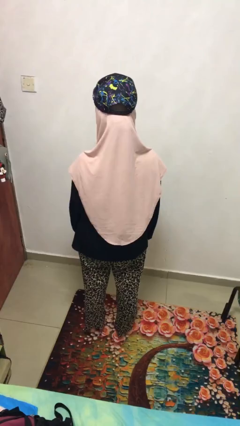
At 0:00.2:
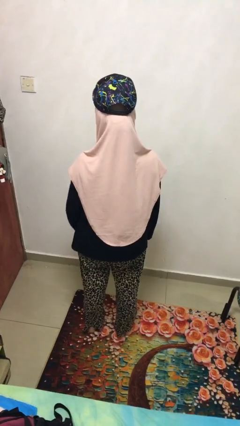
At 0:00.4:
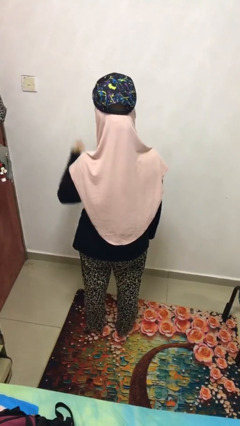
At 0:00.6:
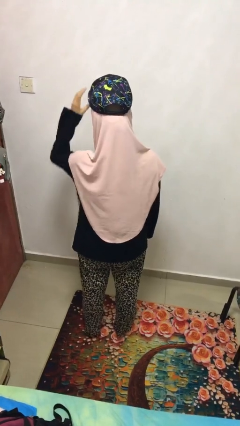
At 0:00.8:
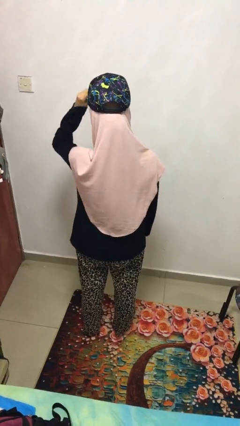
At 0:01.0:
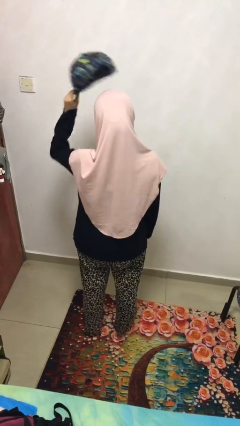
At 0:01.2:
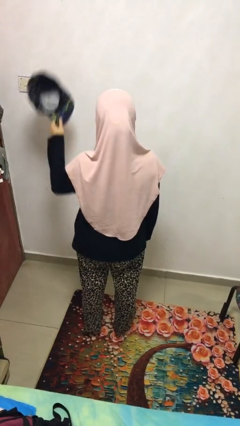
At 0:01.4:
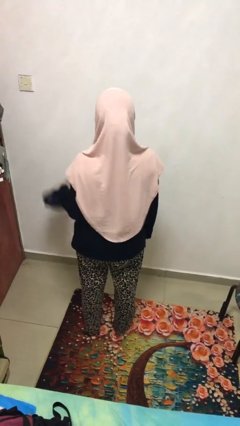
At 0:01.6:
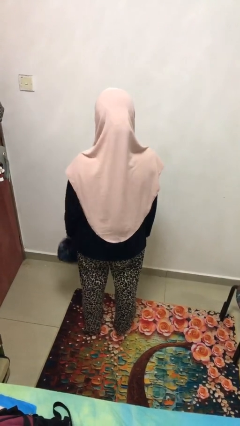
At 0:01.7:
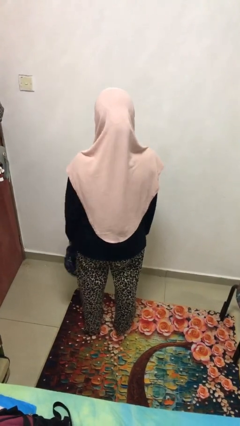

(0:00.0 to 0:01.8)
person takes off hat

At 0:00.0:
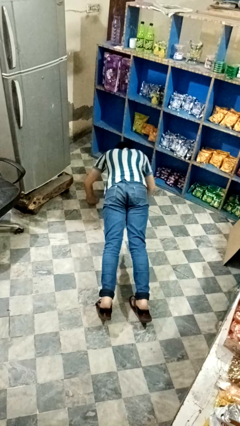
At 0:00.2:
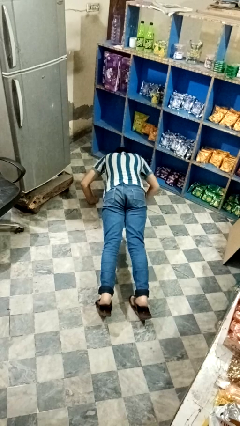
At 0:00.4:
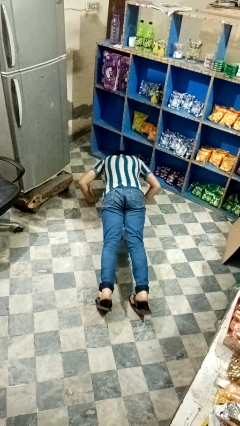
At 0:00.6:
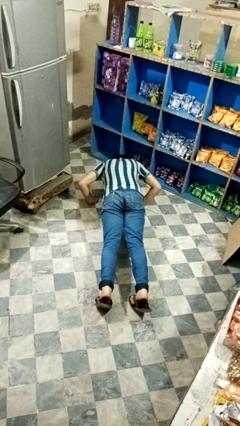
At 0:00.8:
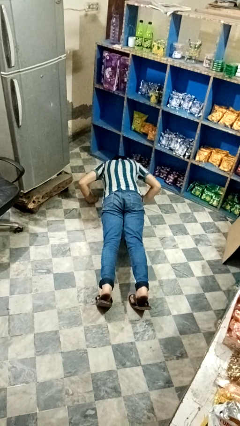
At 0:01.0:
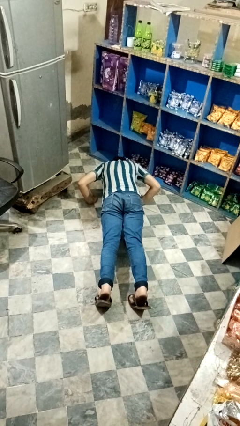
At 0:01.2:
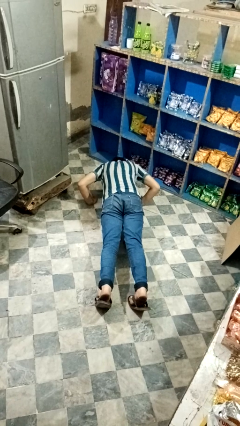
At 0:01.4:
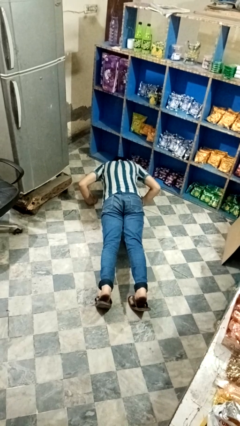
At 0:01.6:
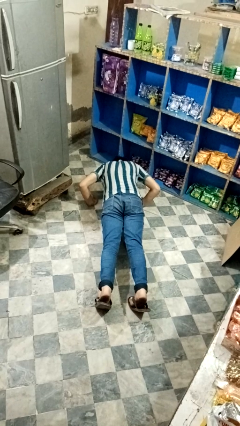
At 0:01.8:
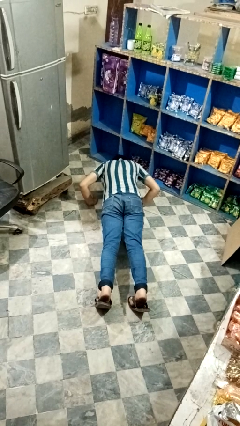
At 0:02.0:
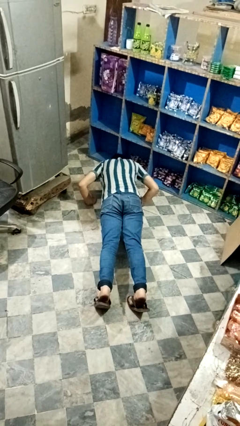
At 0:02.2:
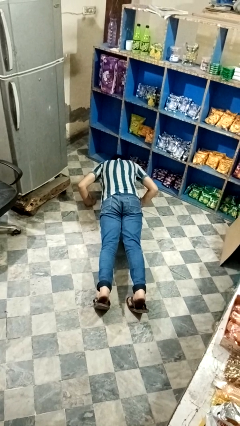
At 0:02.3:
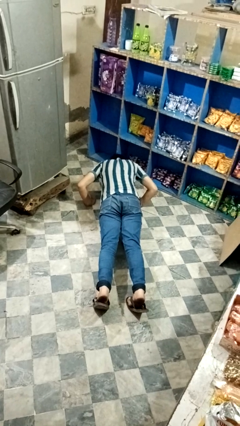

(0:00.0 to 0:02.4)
person exercises with pushup

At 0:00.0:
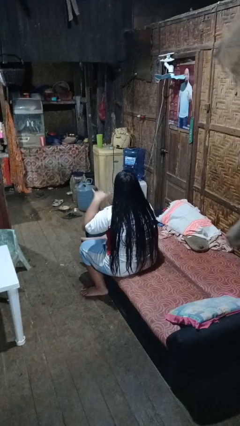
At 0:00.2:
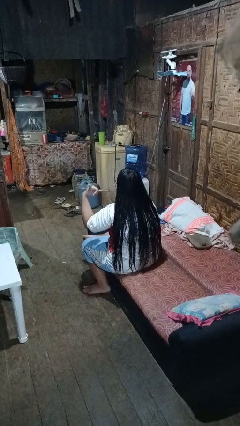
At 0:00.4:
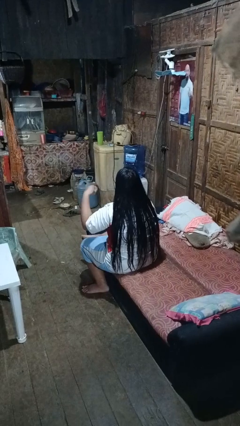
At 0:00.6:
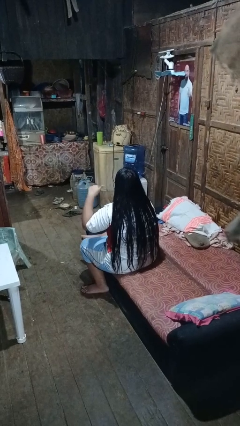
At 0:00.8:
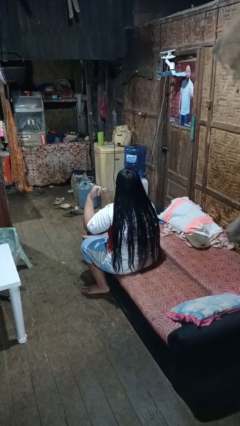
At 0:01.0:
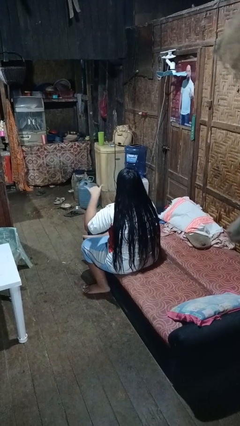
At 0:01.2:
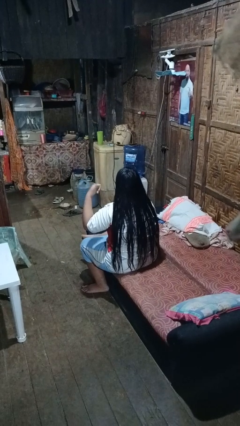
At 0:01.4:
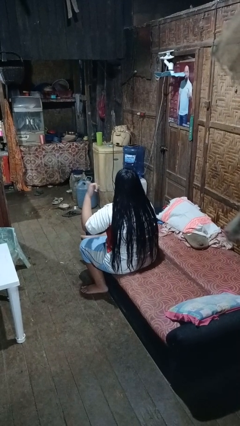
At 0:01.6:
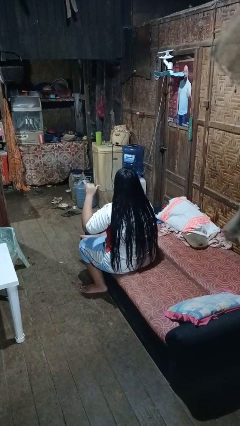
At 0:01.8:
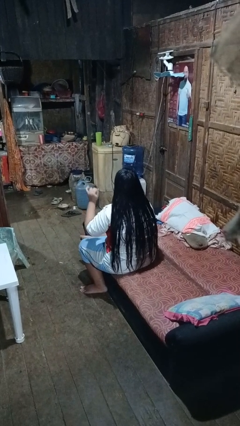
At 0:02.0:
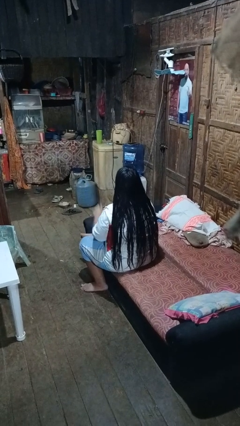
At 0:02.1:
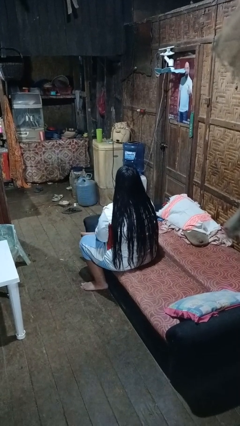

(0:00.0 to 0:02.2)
person gestures hang loose

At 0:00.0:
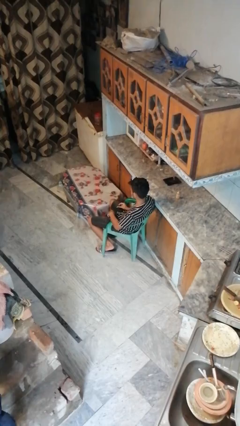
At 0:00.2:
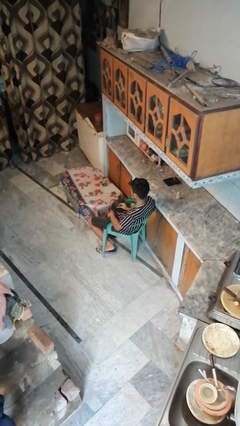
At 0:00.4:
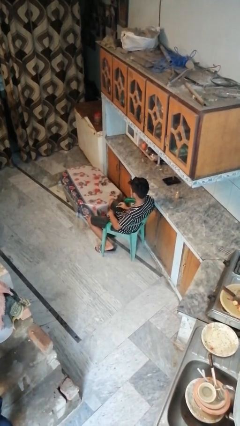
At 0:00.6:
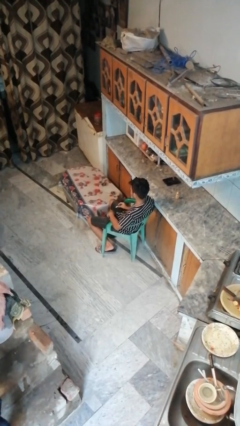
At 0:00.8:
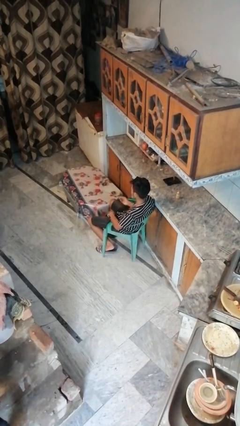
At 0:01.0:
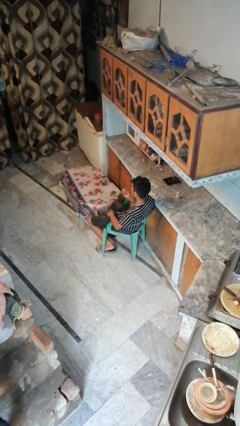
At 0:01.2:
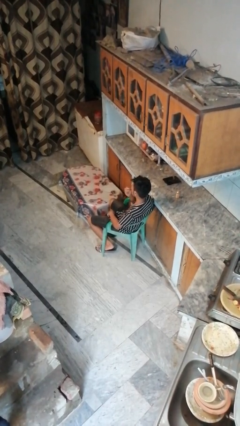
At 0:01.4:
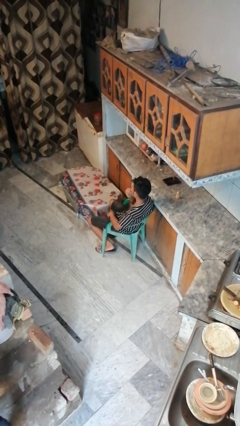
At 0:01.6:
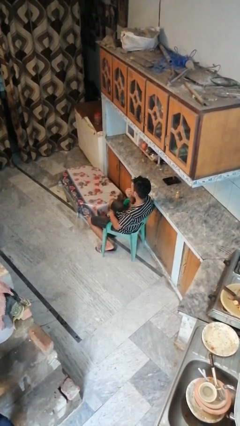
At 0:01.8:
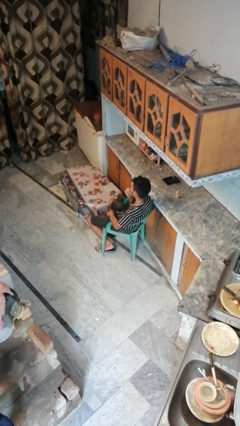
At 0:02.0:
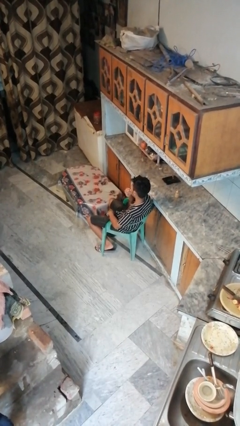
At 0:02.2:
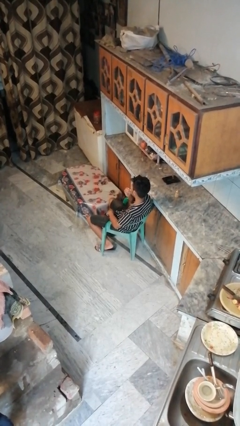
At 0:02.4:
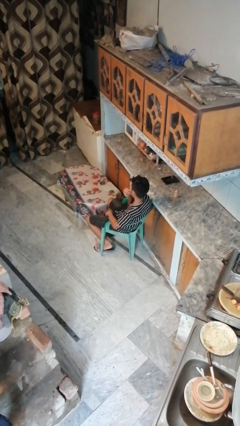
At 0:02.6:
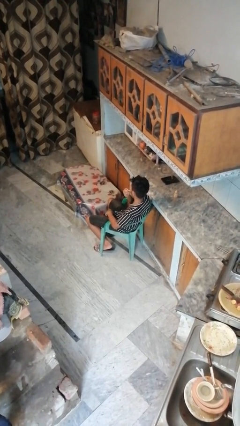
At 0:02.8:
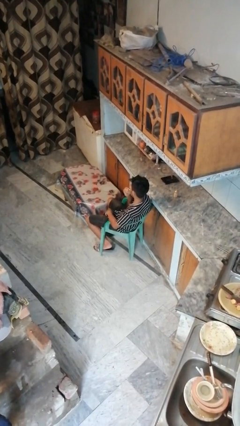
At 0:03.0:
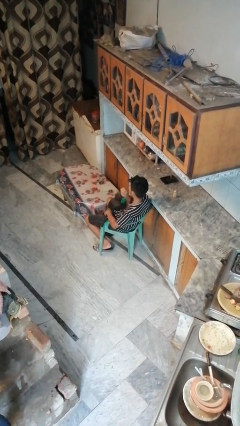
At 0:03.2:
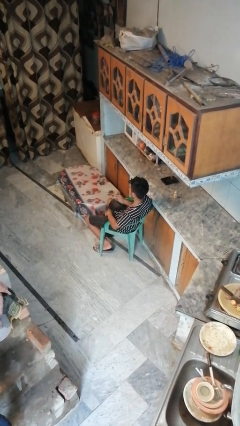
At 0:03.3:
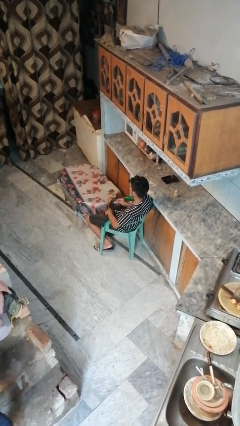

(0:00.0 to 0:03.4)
person applies lip makeup

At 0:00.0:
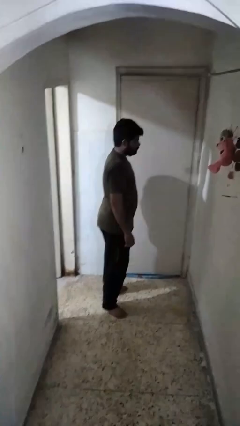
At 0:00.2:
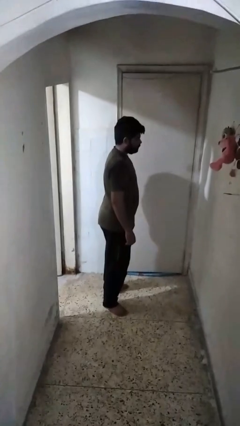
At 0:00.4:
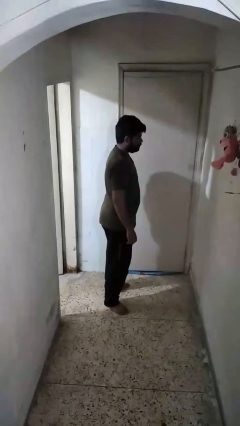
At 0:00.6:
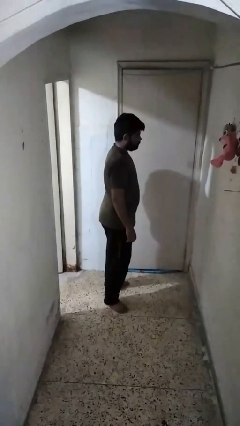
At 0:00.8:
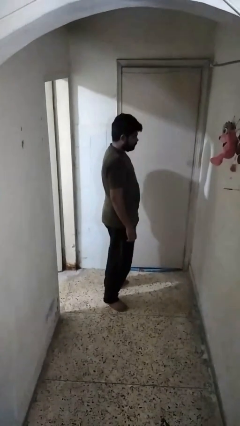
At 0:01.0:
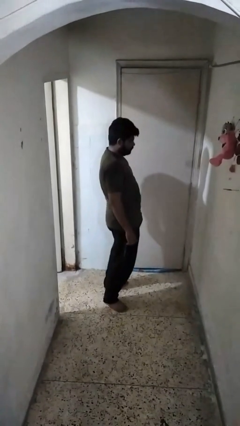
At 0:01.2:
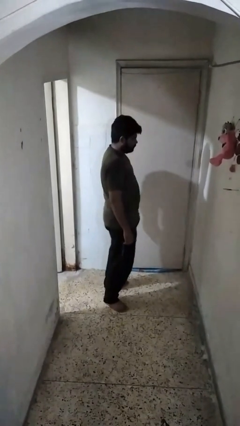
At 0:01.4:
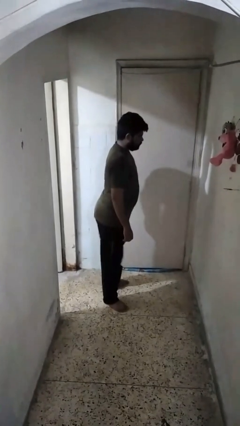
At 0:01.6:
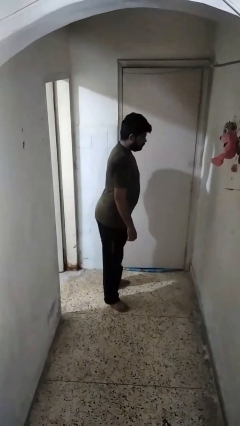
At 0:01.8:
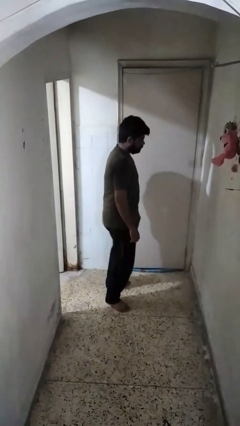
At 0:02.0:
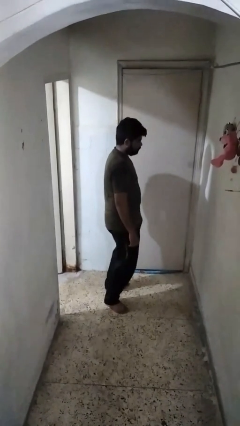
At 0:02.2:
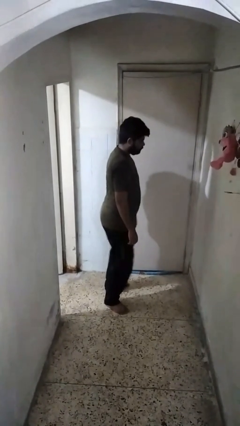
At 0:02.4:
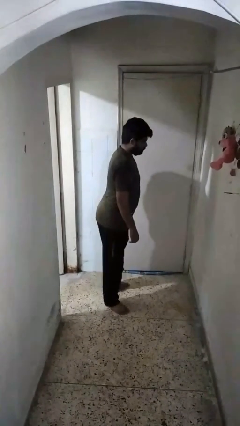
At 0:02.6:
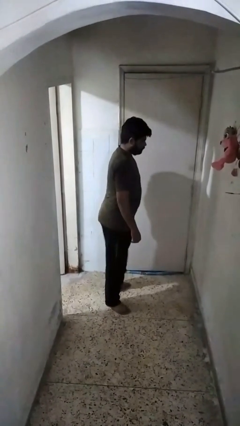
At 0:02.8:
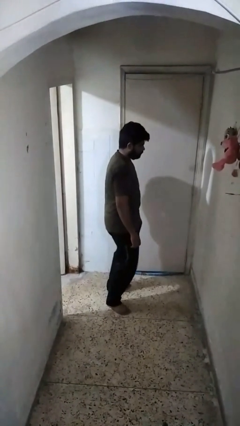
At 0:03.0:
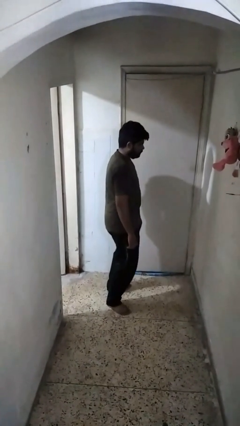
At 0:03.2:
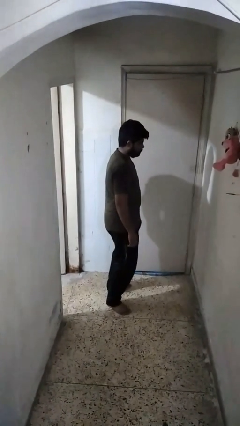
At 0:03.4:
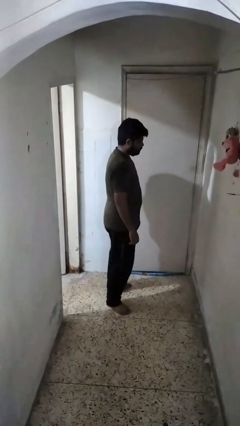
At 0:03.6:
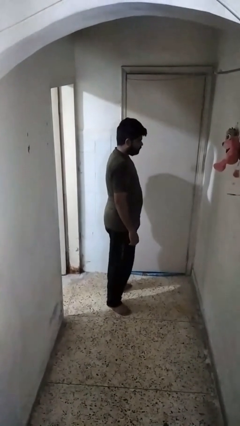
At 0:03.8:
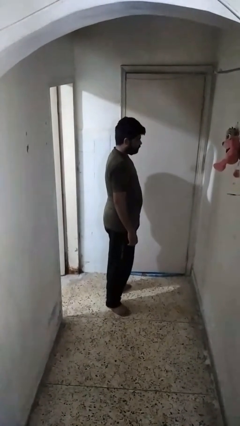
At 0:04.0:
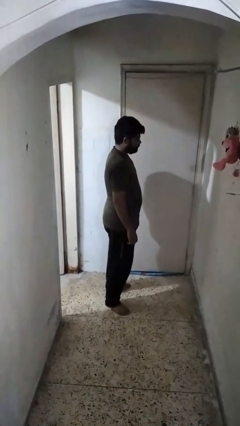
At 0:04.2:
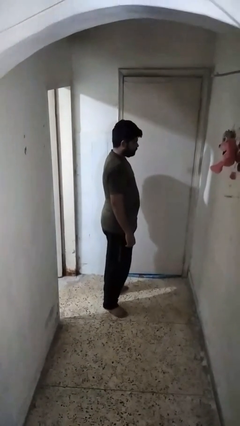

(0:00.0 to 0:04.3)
person wiggles hips

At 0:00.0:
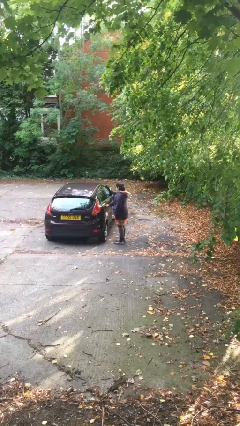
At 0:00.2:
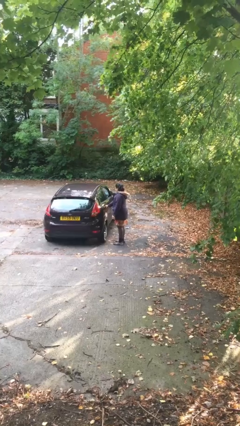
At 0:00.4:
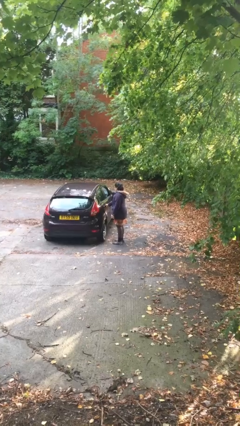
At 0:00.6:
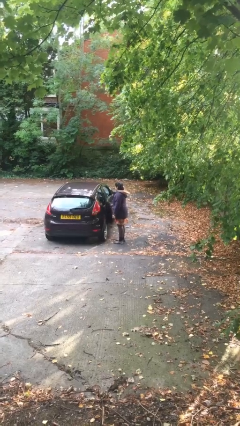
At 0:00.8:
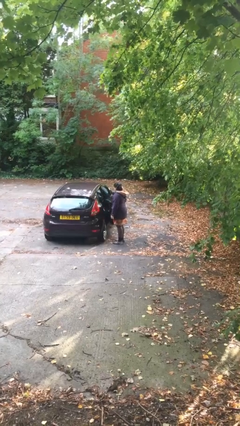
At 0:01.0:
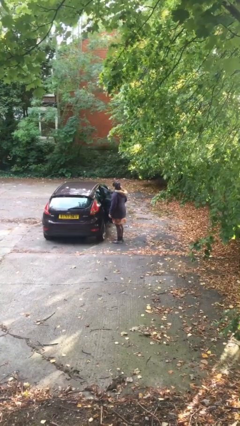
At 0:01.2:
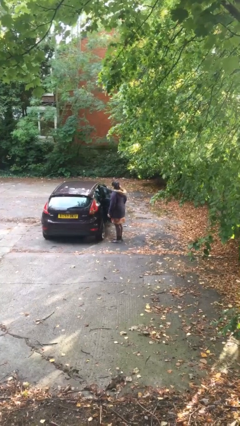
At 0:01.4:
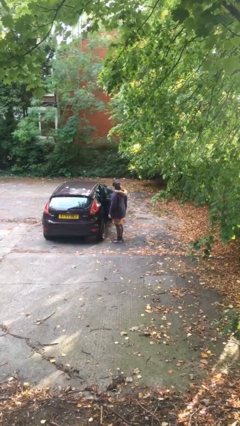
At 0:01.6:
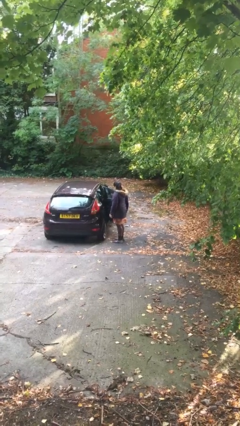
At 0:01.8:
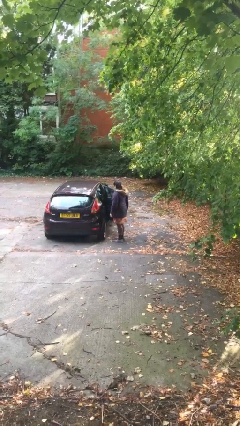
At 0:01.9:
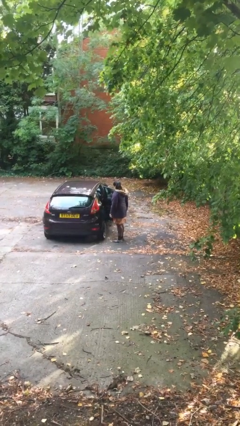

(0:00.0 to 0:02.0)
person opens car door

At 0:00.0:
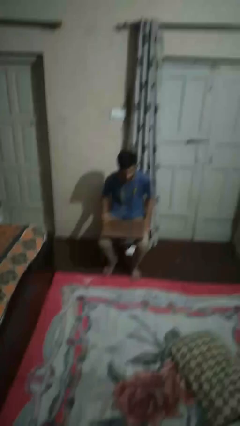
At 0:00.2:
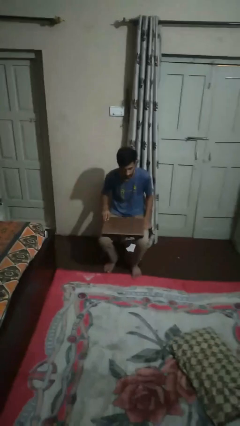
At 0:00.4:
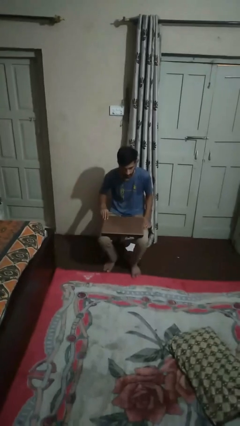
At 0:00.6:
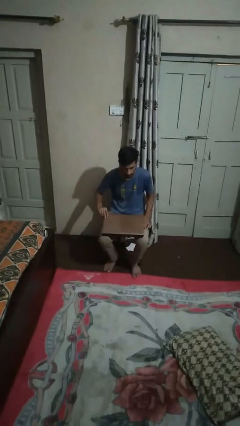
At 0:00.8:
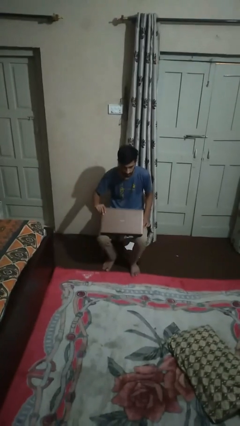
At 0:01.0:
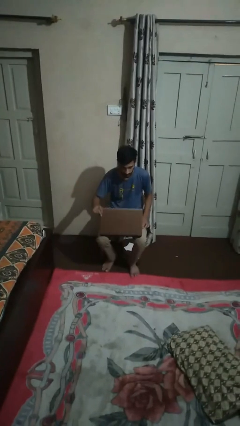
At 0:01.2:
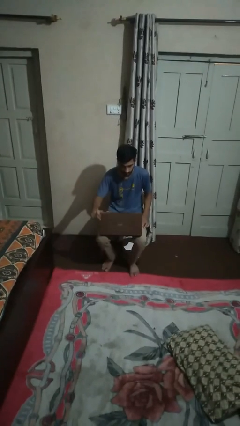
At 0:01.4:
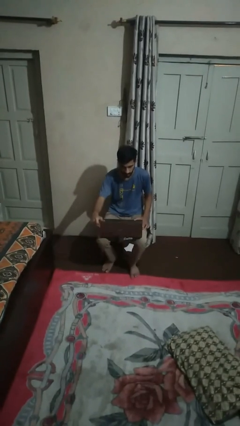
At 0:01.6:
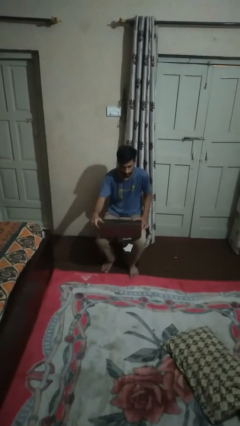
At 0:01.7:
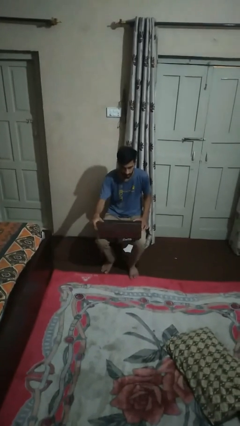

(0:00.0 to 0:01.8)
person opens laptop
